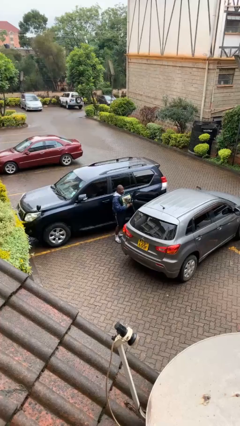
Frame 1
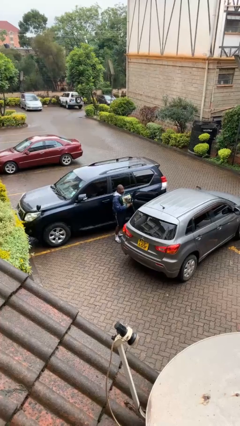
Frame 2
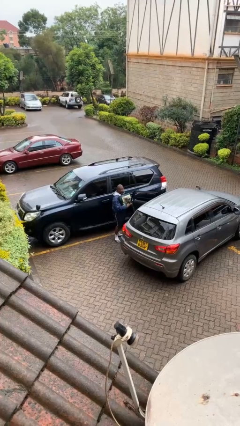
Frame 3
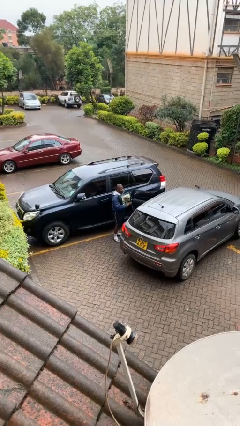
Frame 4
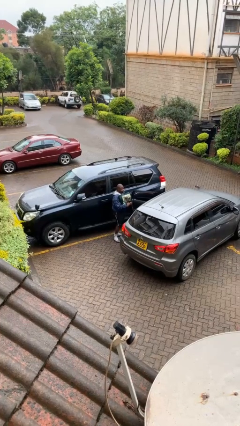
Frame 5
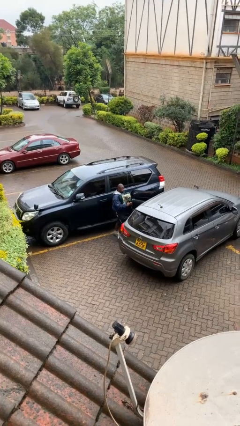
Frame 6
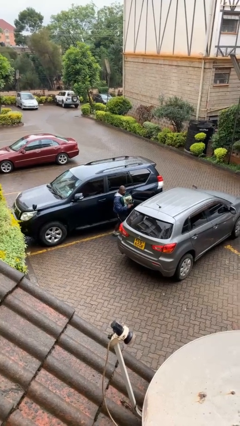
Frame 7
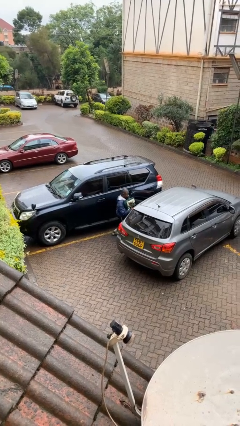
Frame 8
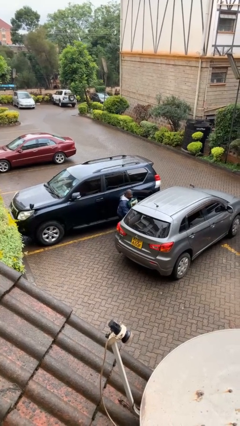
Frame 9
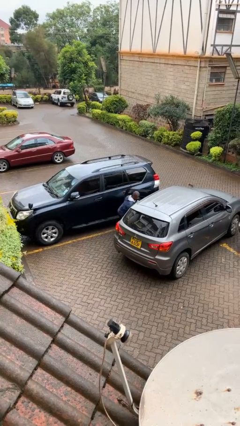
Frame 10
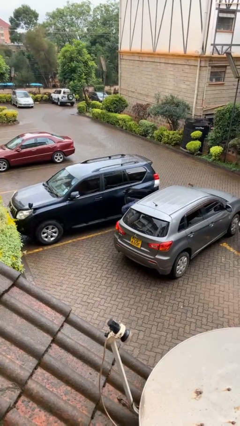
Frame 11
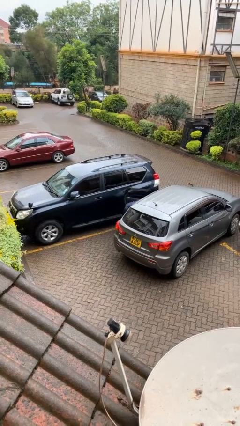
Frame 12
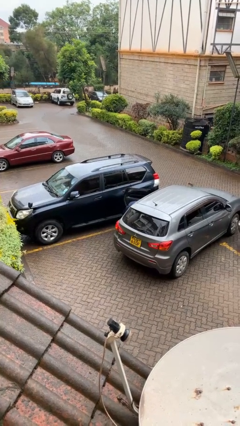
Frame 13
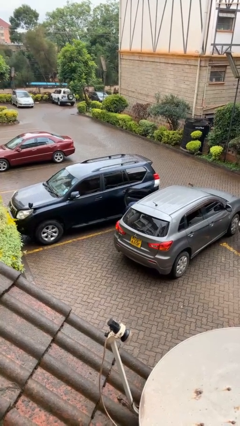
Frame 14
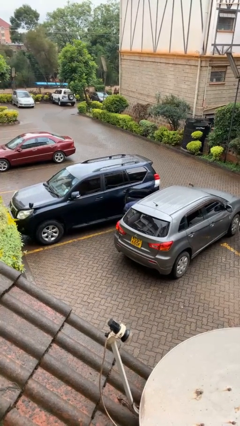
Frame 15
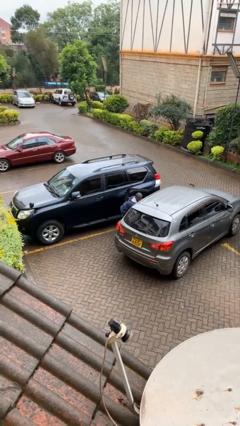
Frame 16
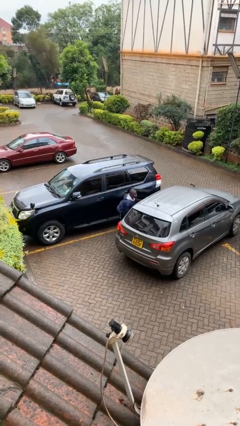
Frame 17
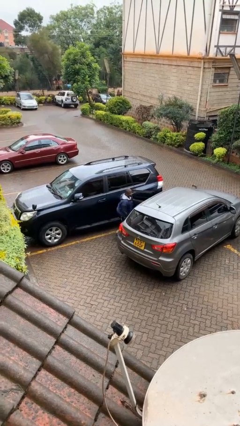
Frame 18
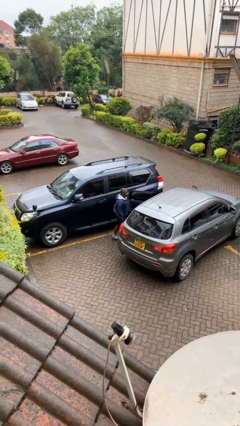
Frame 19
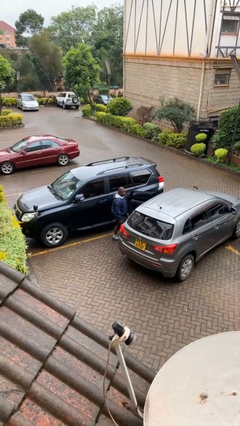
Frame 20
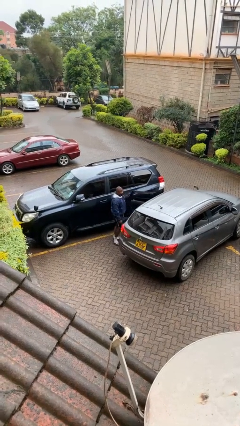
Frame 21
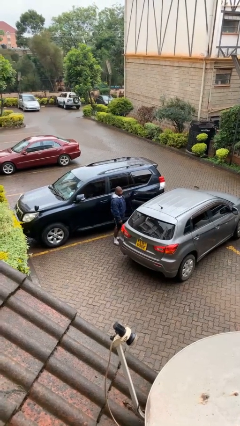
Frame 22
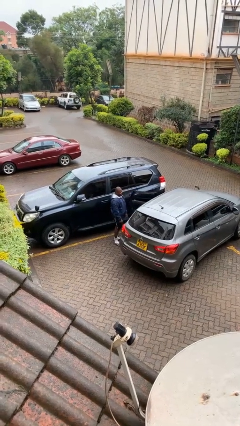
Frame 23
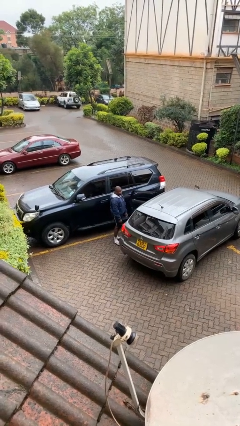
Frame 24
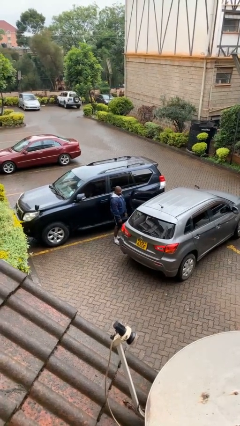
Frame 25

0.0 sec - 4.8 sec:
person loads car

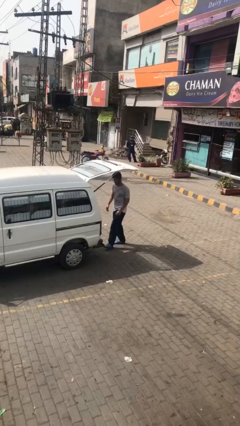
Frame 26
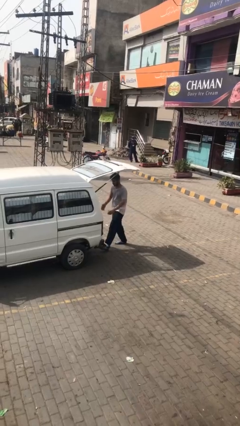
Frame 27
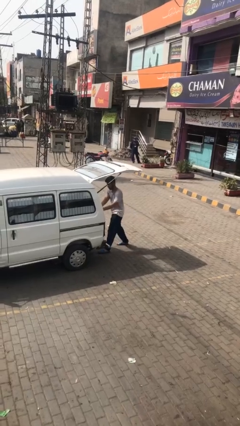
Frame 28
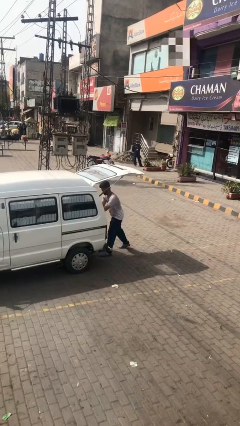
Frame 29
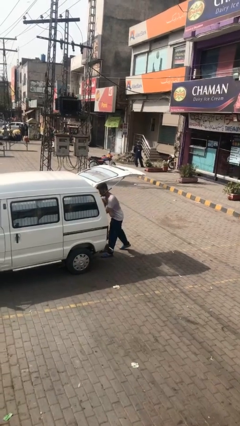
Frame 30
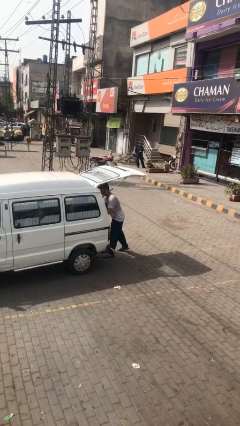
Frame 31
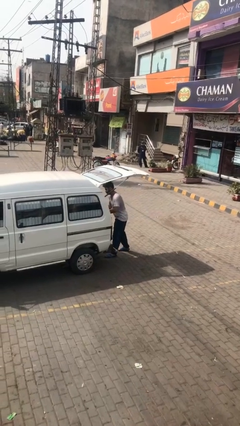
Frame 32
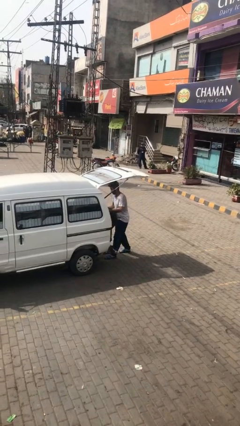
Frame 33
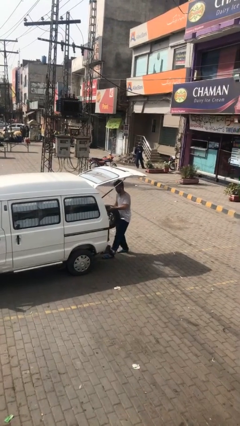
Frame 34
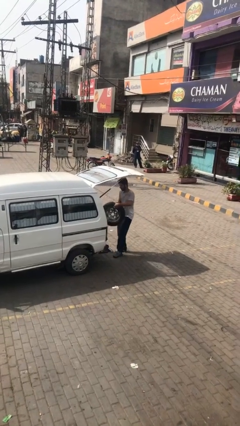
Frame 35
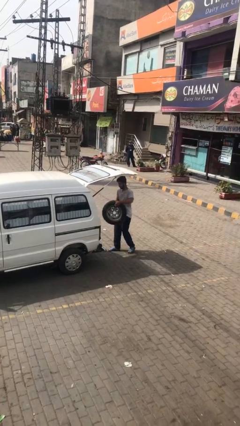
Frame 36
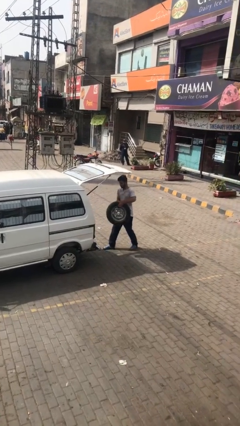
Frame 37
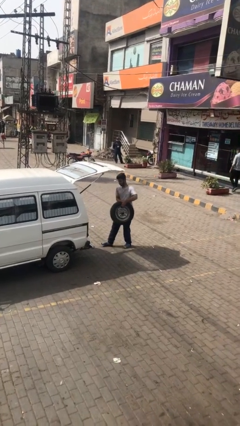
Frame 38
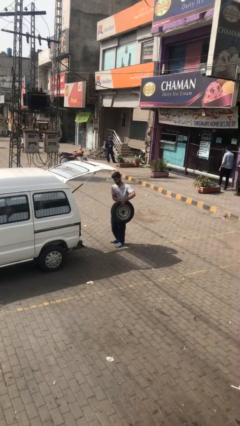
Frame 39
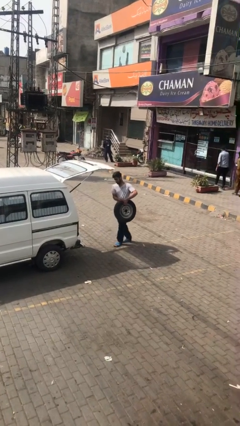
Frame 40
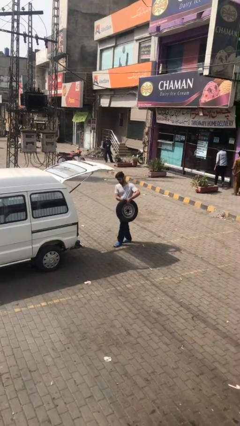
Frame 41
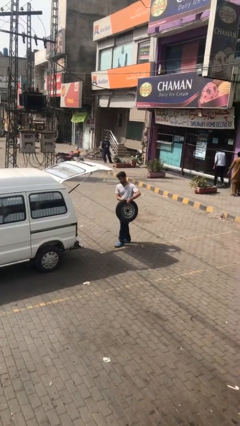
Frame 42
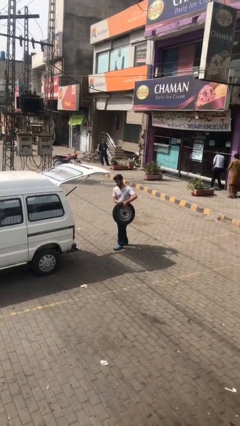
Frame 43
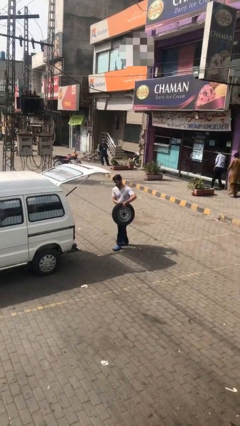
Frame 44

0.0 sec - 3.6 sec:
person unloads car

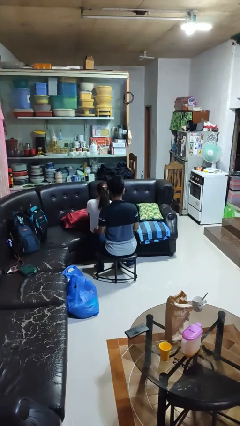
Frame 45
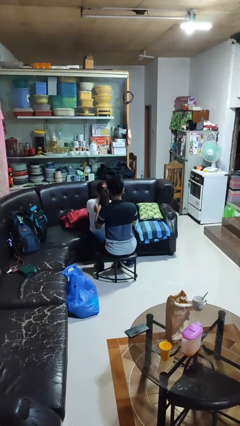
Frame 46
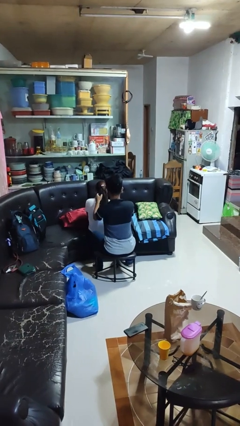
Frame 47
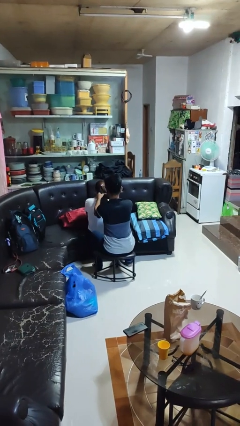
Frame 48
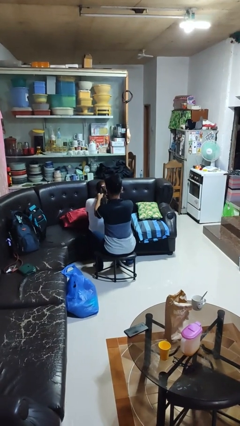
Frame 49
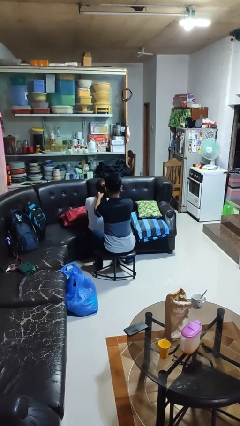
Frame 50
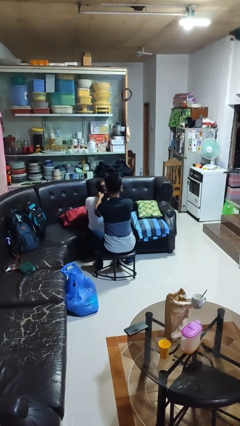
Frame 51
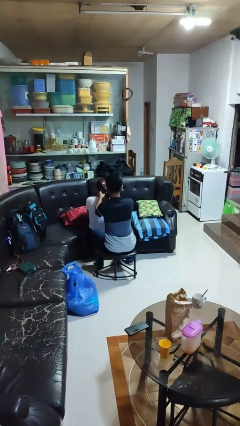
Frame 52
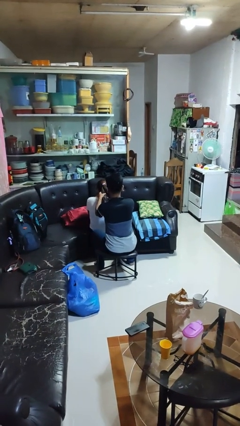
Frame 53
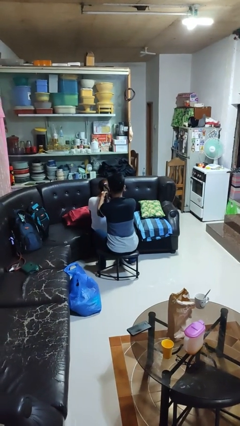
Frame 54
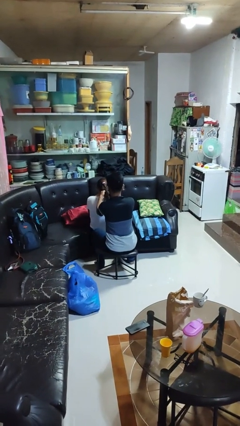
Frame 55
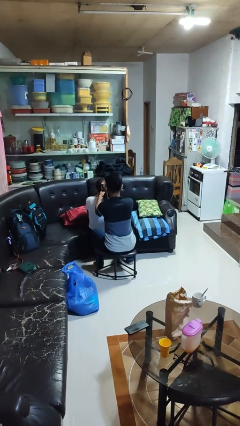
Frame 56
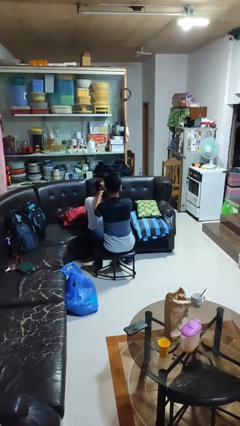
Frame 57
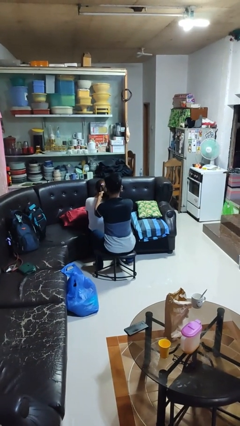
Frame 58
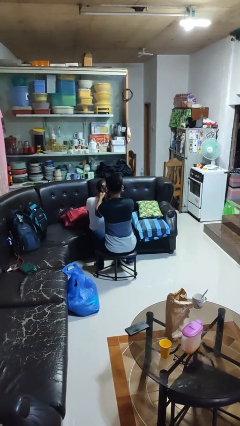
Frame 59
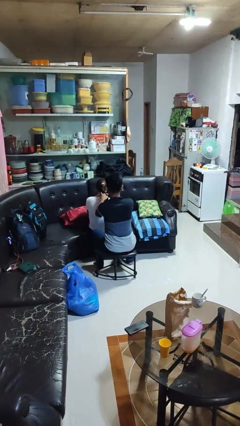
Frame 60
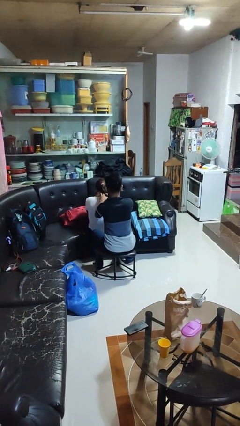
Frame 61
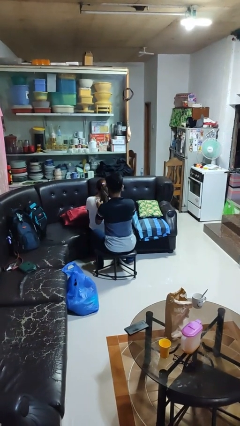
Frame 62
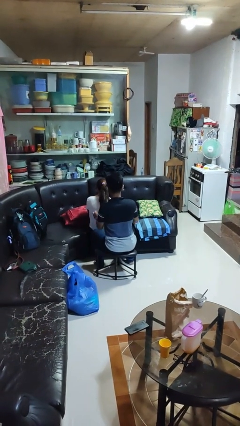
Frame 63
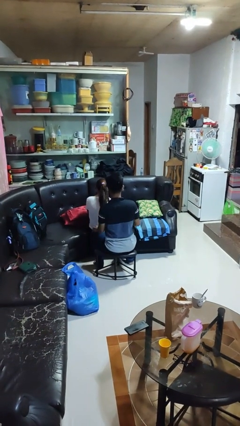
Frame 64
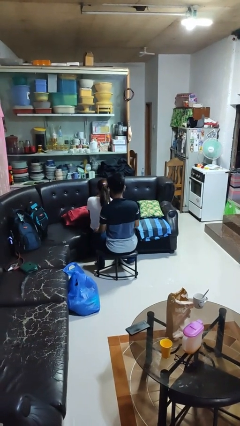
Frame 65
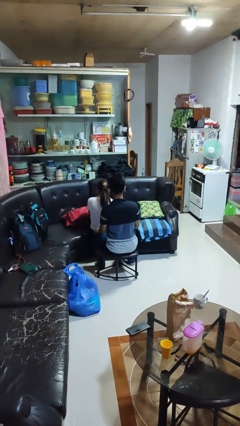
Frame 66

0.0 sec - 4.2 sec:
person braids hair of person

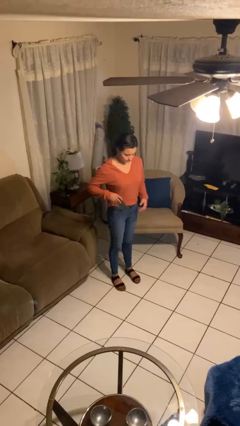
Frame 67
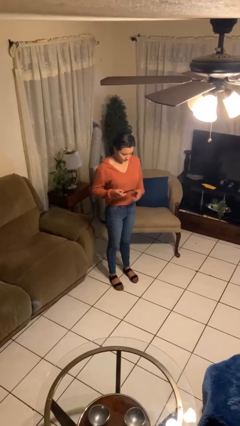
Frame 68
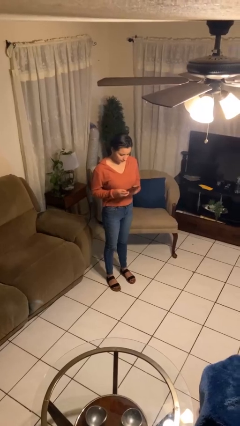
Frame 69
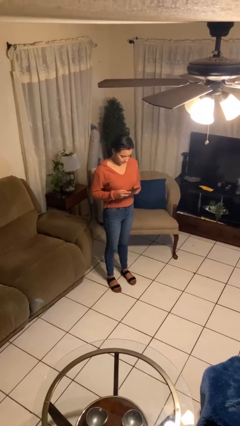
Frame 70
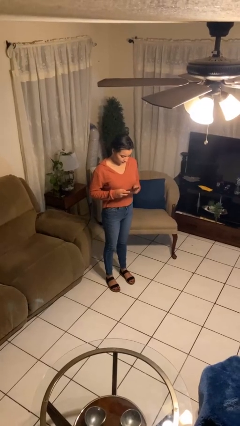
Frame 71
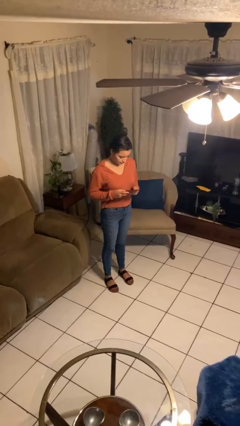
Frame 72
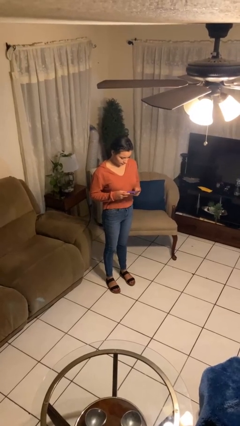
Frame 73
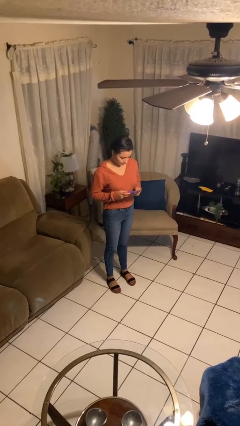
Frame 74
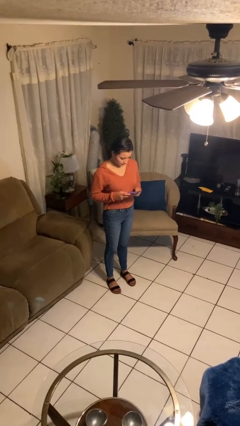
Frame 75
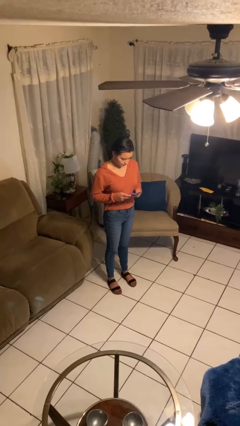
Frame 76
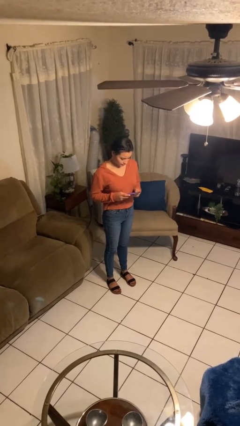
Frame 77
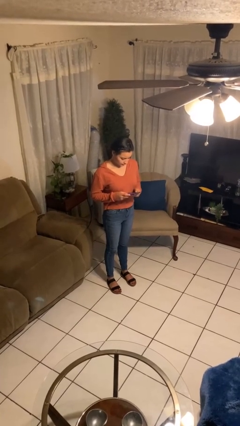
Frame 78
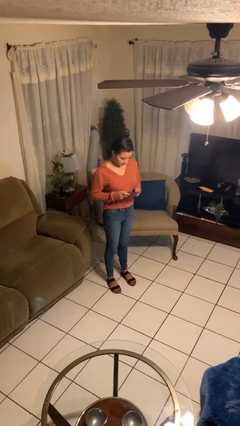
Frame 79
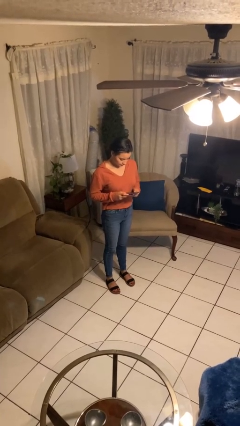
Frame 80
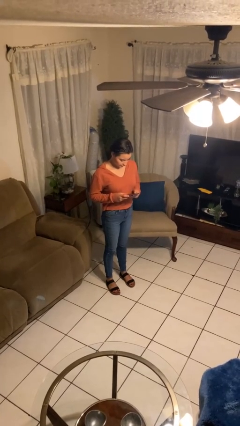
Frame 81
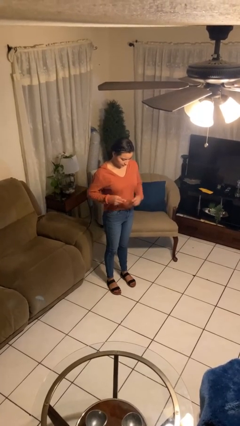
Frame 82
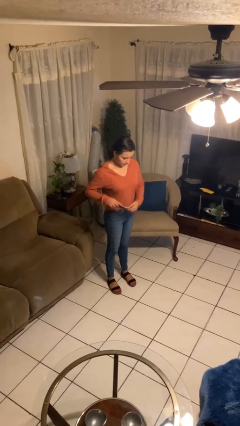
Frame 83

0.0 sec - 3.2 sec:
person takes phone from pocket

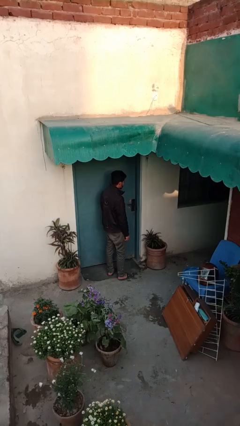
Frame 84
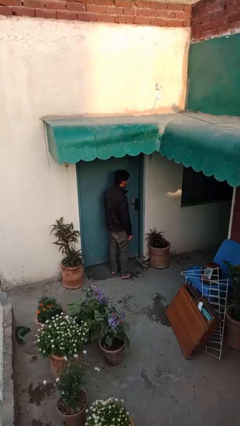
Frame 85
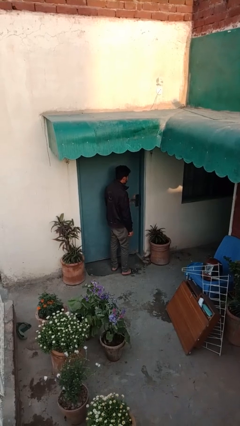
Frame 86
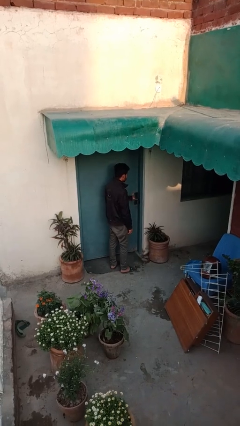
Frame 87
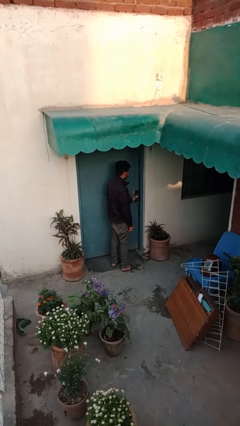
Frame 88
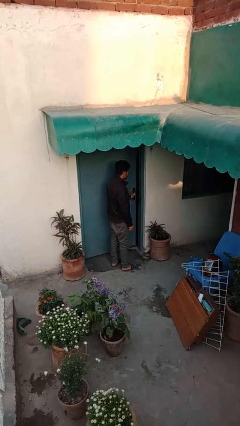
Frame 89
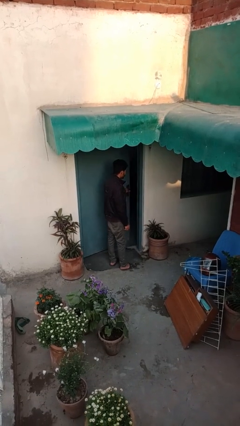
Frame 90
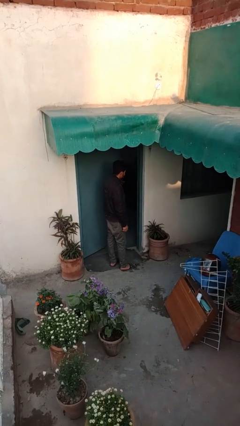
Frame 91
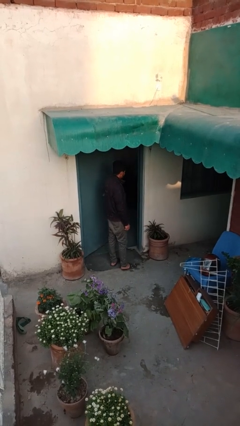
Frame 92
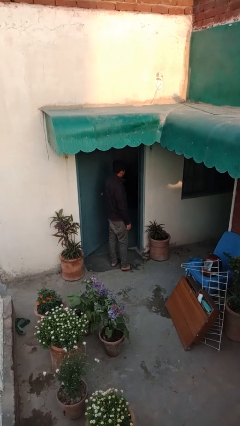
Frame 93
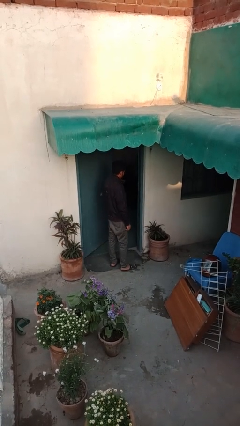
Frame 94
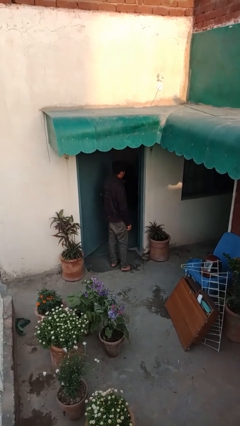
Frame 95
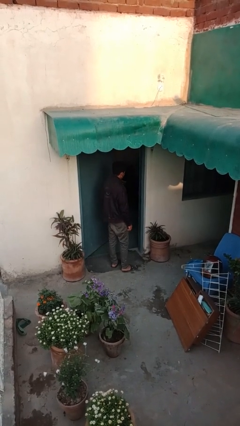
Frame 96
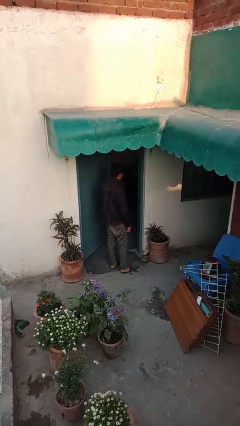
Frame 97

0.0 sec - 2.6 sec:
person opens facility door
